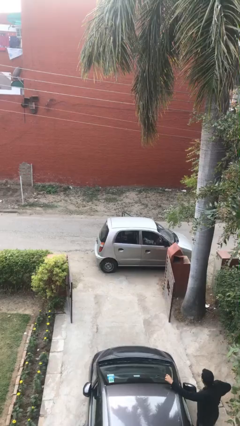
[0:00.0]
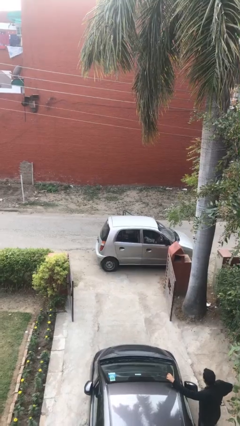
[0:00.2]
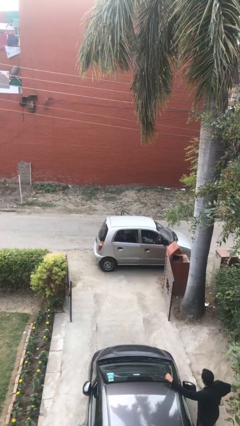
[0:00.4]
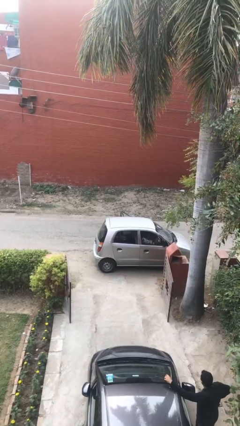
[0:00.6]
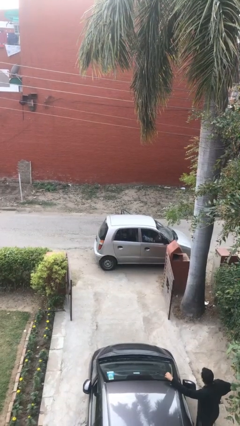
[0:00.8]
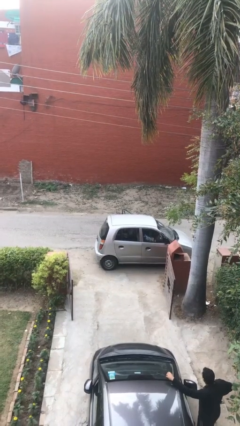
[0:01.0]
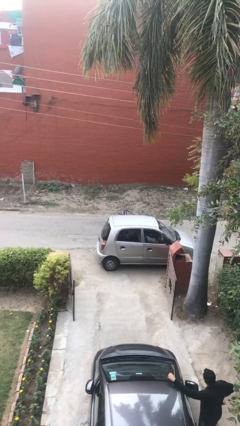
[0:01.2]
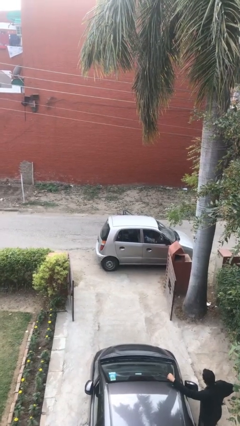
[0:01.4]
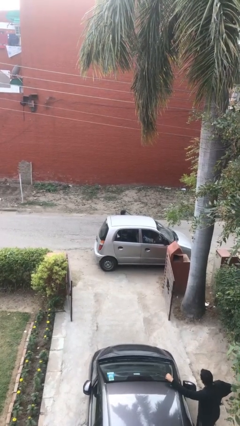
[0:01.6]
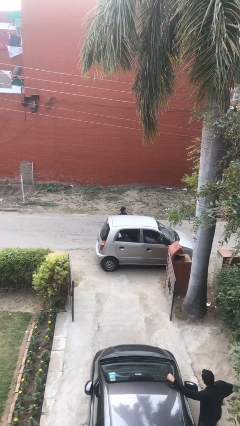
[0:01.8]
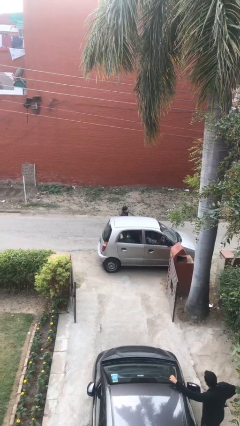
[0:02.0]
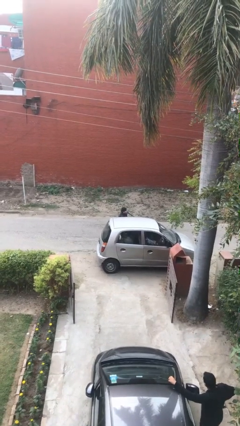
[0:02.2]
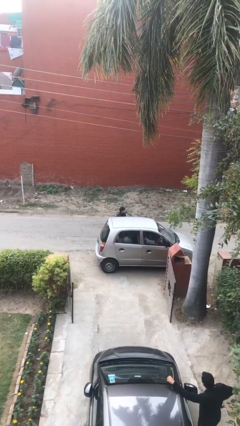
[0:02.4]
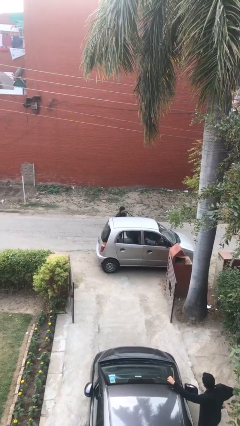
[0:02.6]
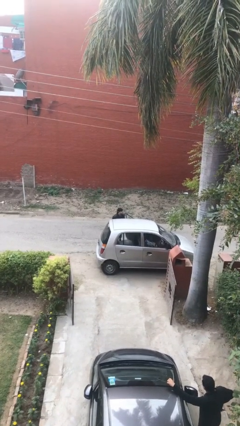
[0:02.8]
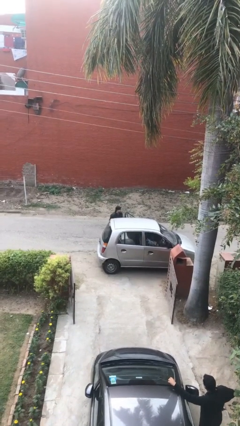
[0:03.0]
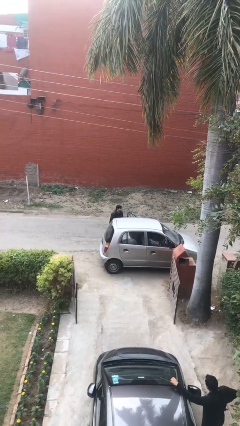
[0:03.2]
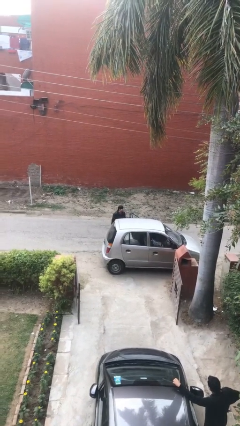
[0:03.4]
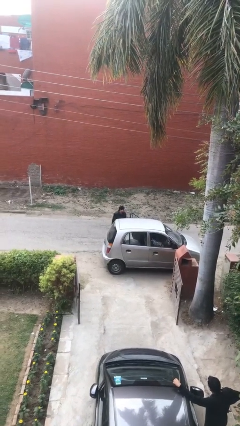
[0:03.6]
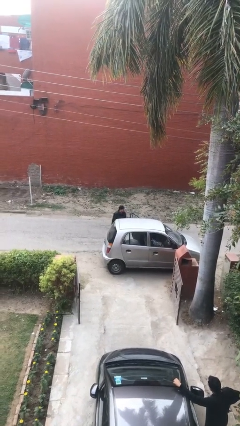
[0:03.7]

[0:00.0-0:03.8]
person exits car

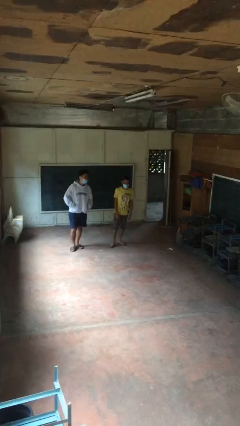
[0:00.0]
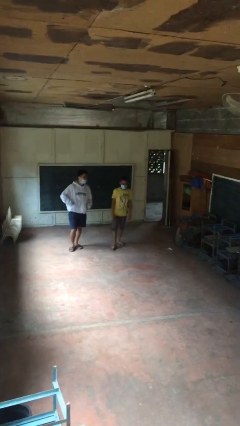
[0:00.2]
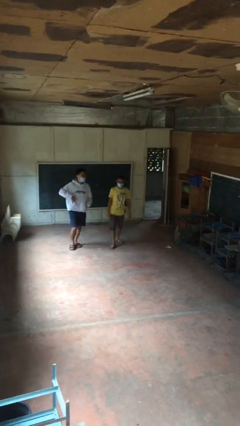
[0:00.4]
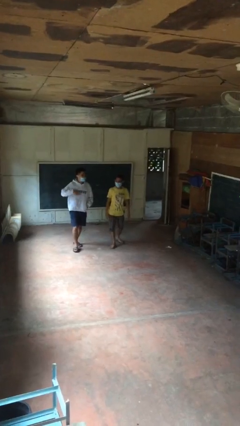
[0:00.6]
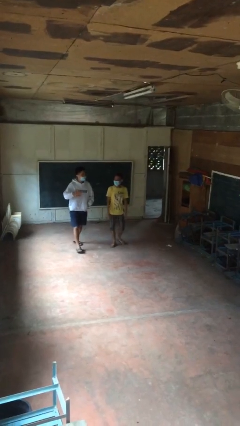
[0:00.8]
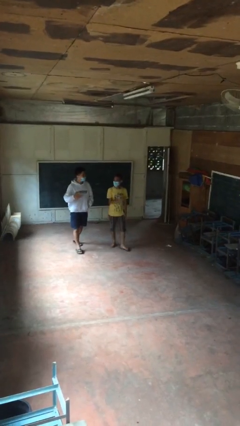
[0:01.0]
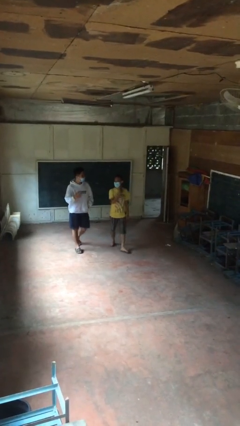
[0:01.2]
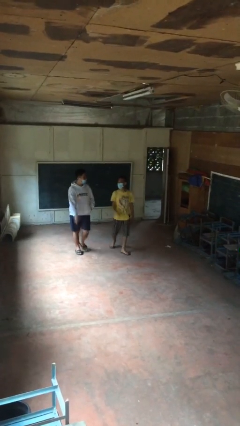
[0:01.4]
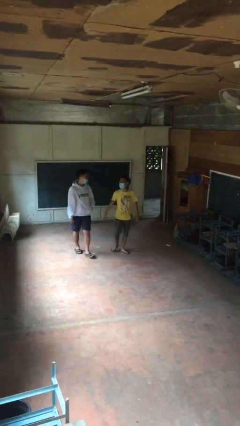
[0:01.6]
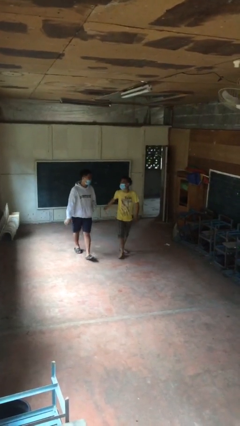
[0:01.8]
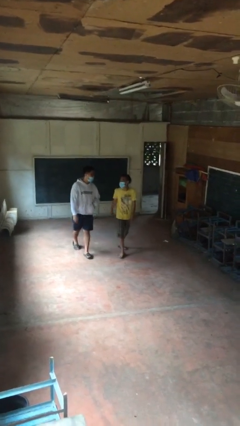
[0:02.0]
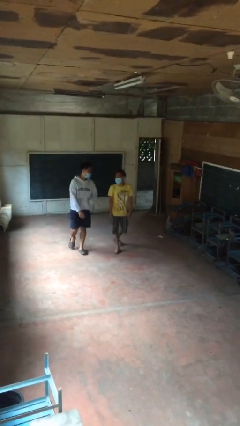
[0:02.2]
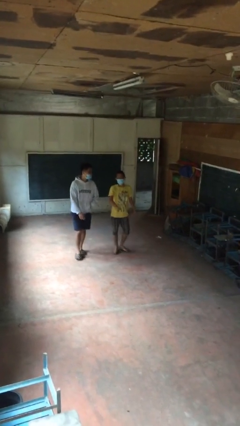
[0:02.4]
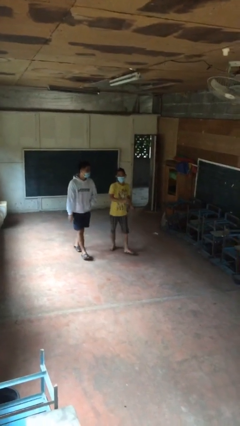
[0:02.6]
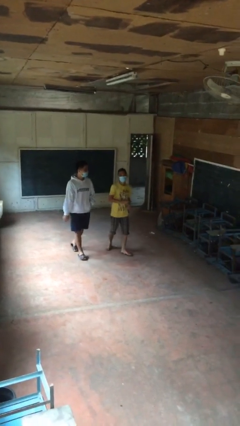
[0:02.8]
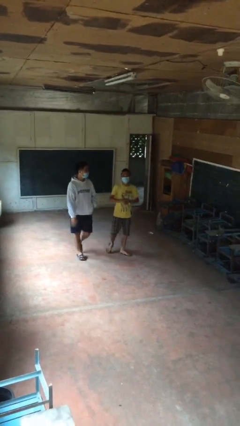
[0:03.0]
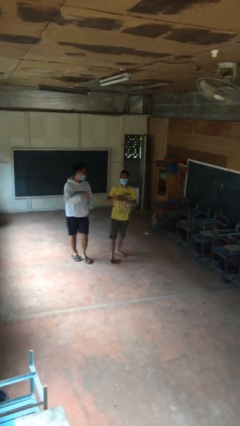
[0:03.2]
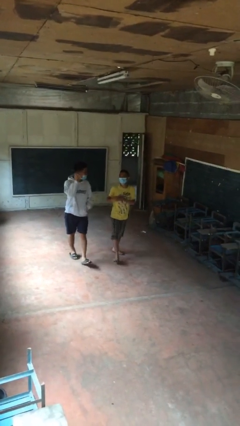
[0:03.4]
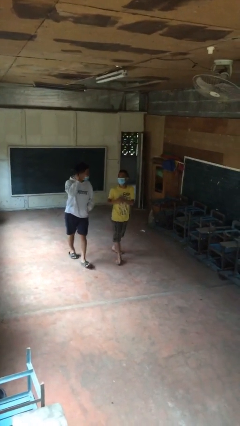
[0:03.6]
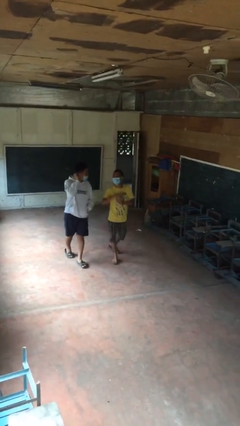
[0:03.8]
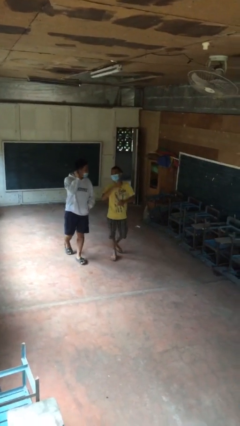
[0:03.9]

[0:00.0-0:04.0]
person talks to person

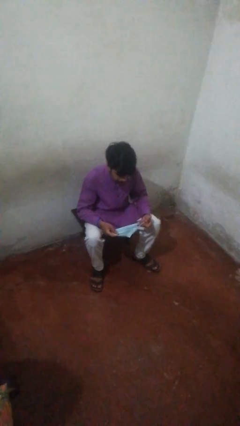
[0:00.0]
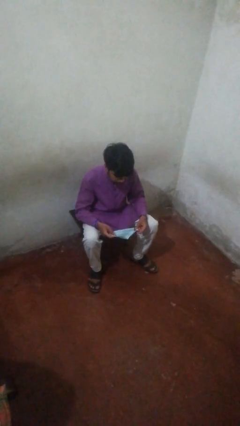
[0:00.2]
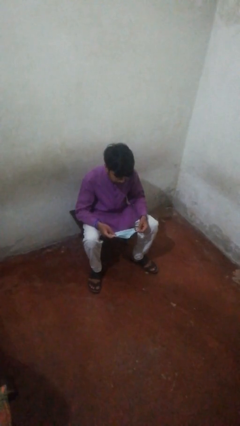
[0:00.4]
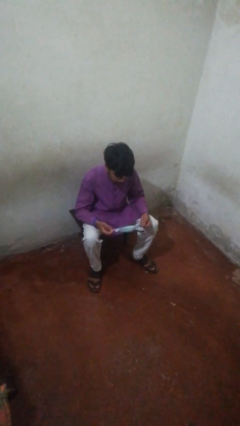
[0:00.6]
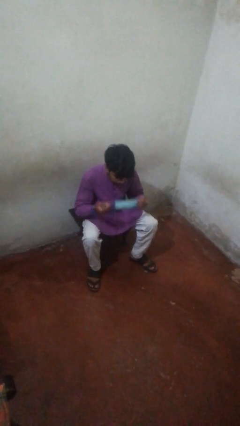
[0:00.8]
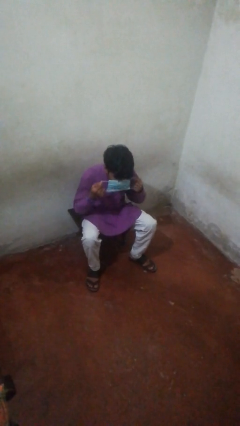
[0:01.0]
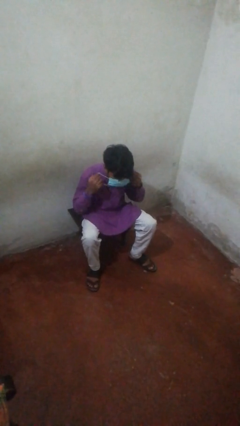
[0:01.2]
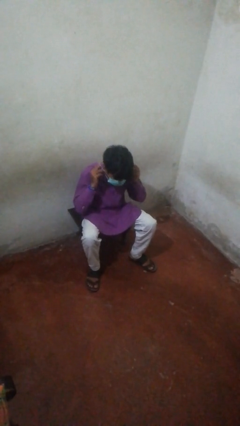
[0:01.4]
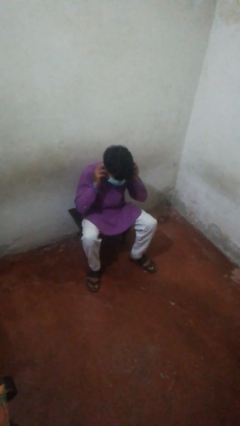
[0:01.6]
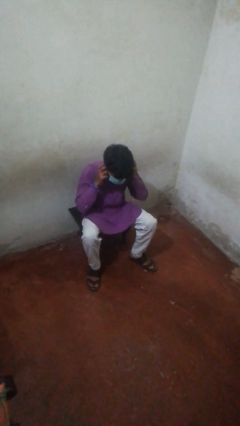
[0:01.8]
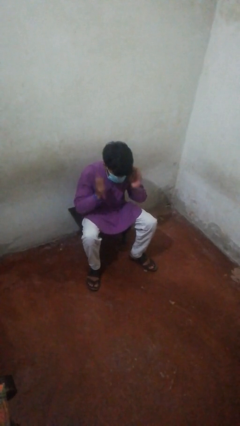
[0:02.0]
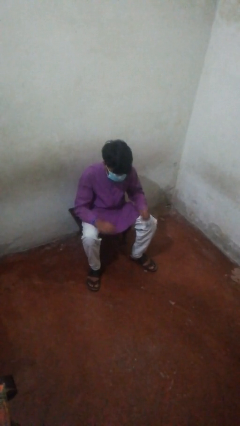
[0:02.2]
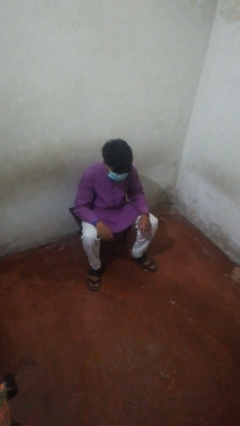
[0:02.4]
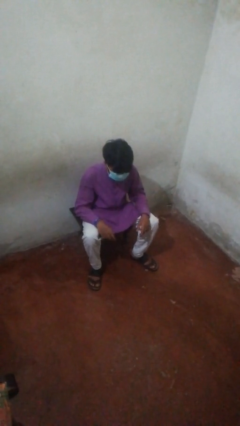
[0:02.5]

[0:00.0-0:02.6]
person puts on facemask

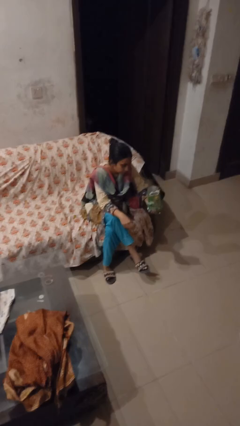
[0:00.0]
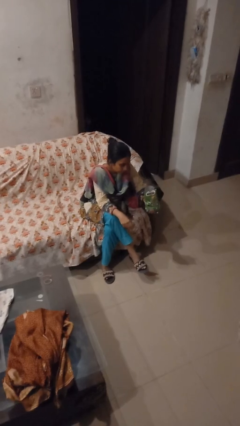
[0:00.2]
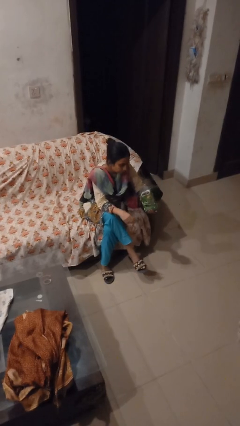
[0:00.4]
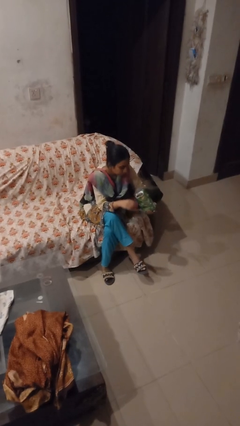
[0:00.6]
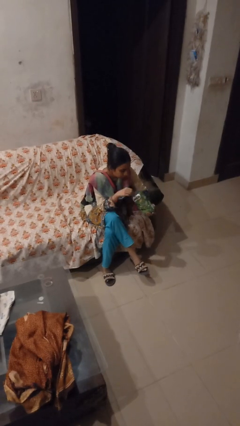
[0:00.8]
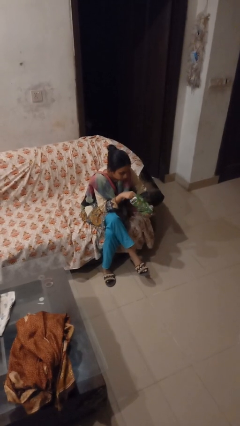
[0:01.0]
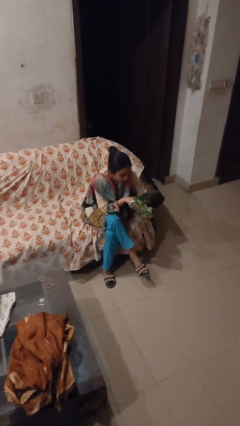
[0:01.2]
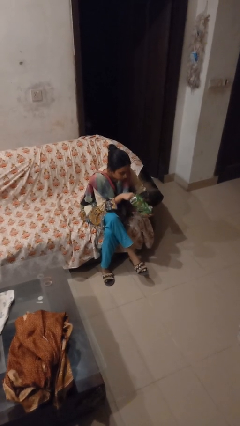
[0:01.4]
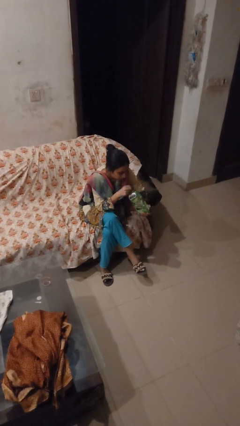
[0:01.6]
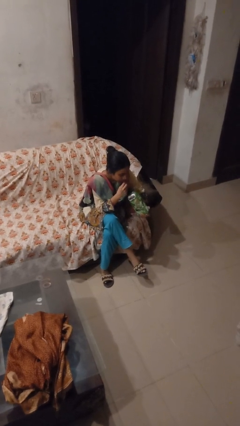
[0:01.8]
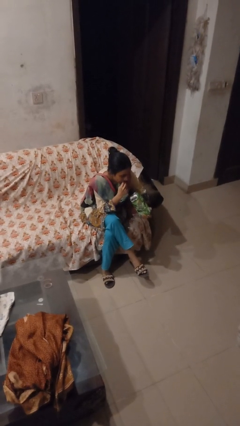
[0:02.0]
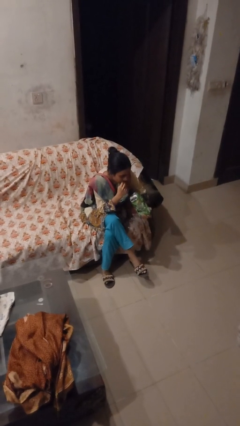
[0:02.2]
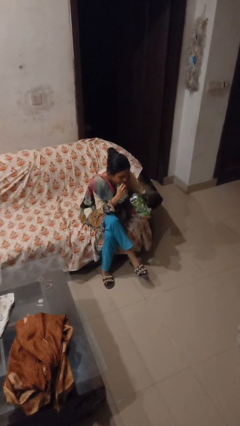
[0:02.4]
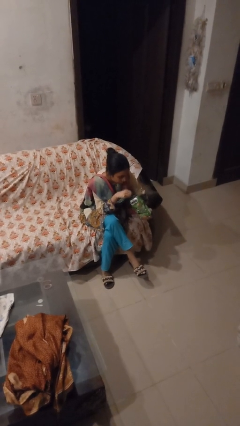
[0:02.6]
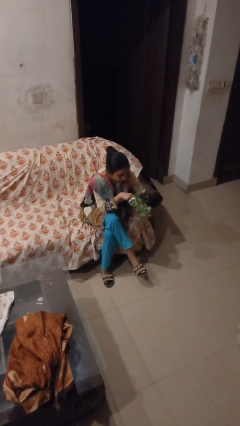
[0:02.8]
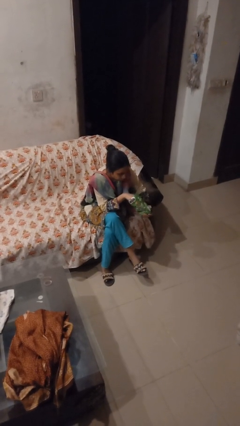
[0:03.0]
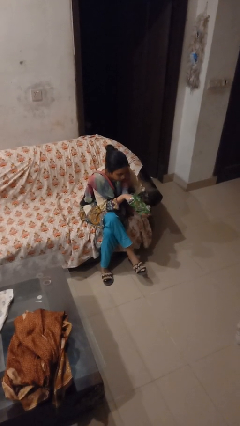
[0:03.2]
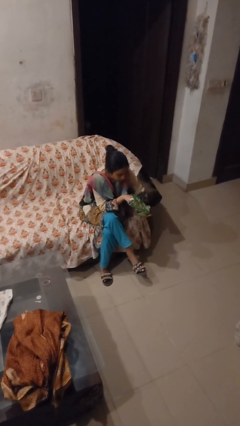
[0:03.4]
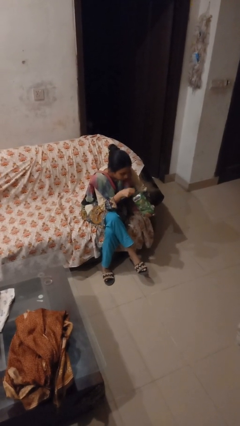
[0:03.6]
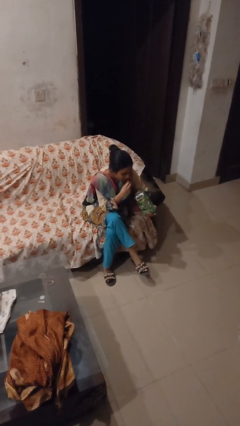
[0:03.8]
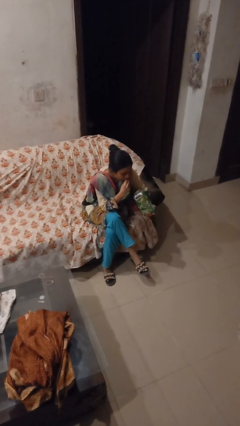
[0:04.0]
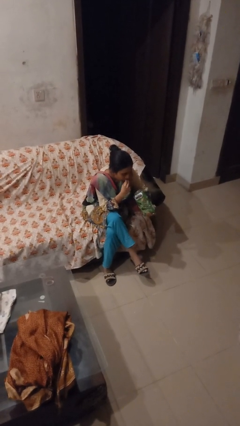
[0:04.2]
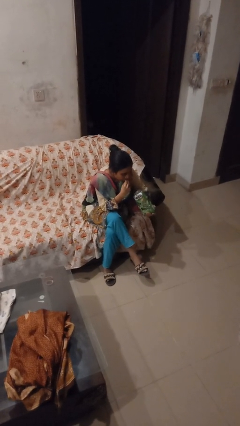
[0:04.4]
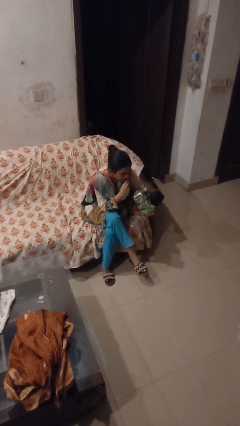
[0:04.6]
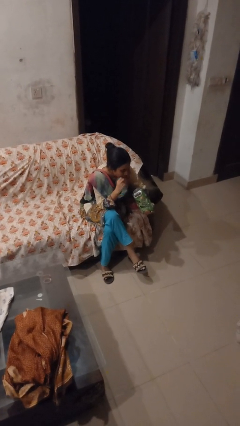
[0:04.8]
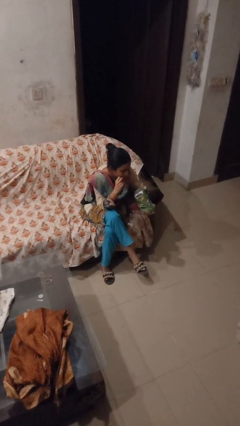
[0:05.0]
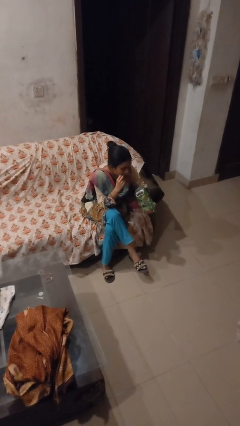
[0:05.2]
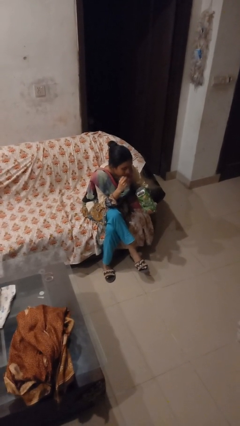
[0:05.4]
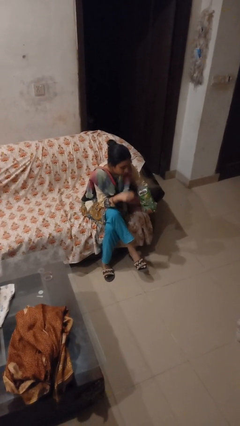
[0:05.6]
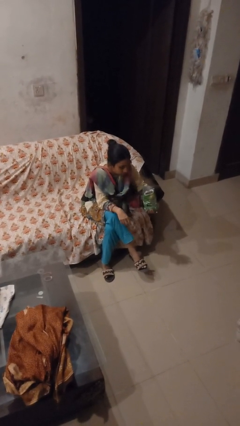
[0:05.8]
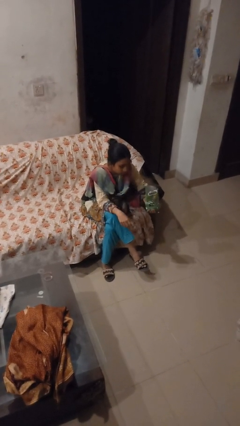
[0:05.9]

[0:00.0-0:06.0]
person eats snack from bag

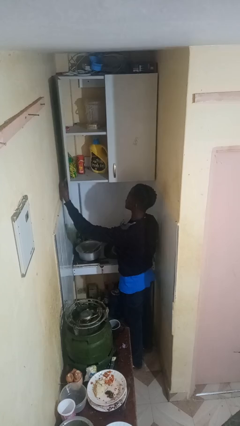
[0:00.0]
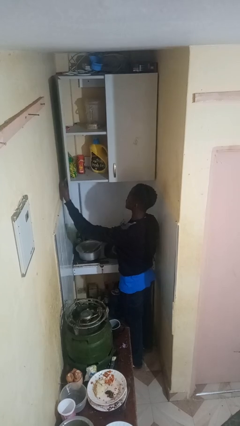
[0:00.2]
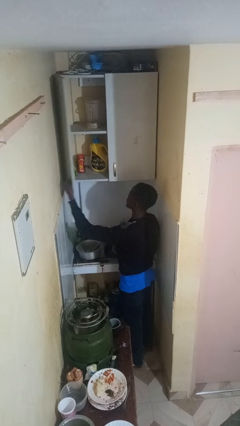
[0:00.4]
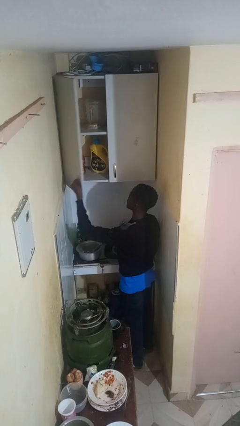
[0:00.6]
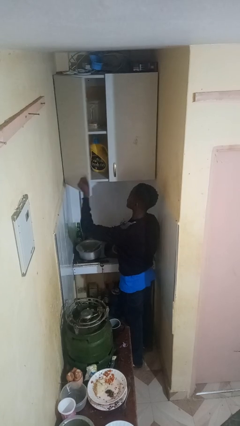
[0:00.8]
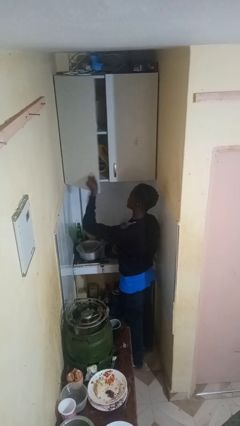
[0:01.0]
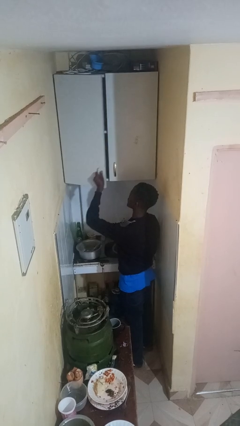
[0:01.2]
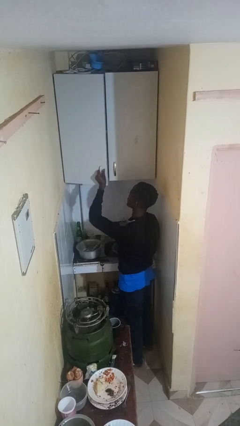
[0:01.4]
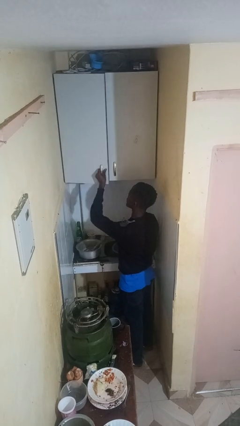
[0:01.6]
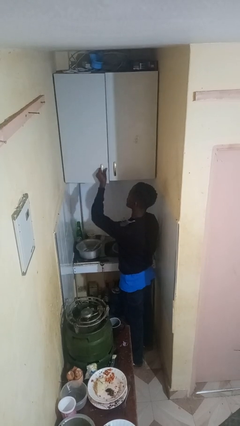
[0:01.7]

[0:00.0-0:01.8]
person closes kitchen drawer
